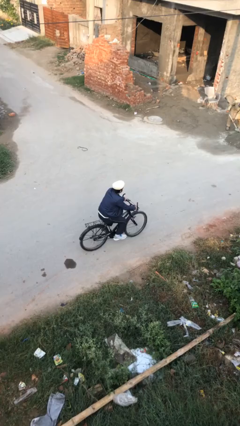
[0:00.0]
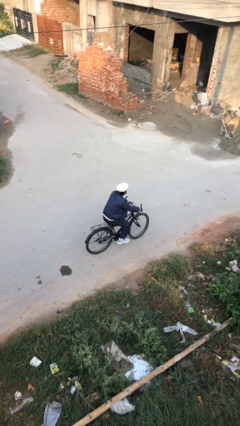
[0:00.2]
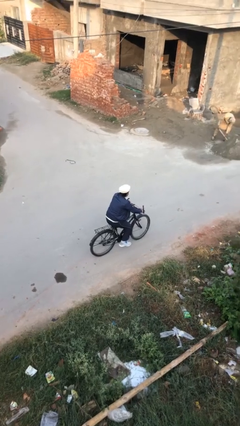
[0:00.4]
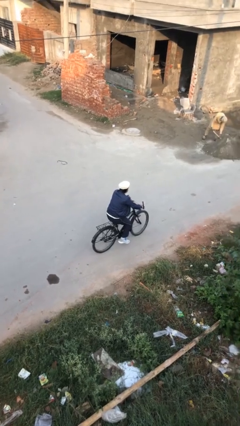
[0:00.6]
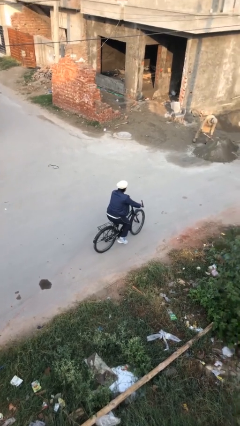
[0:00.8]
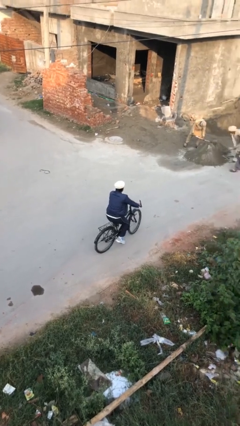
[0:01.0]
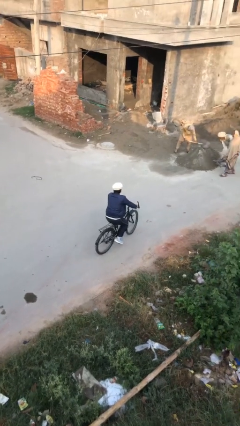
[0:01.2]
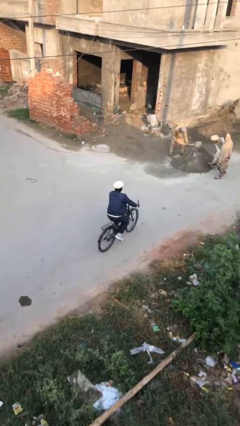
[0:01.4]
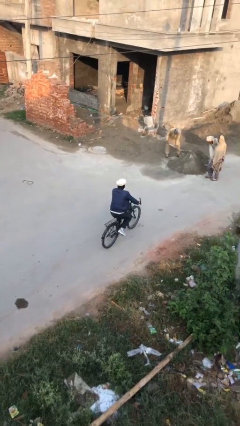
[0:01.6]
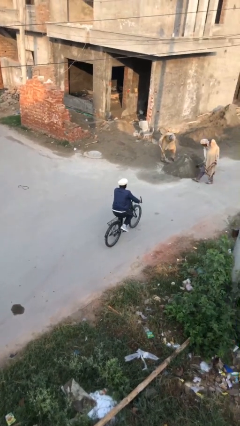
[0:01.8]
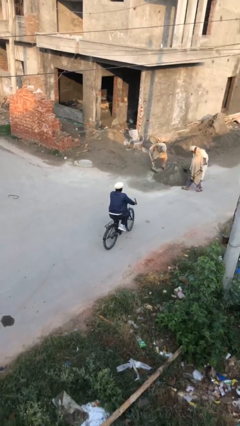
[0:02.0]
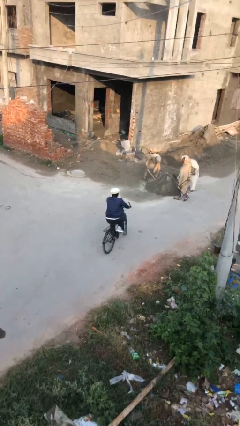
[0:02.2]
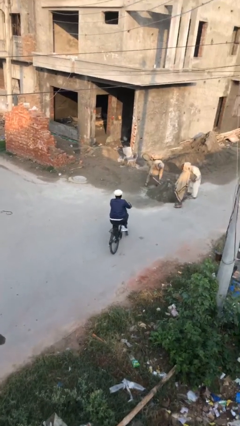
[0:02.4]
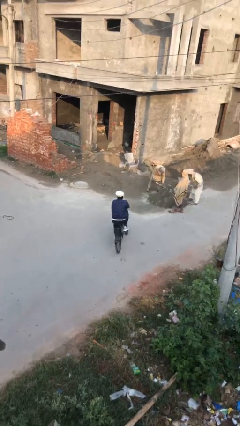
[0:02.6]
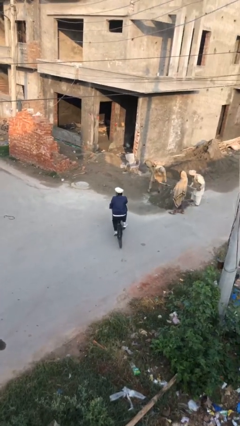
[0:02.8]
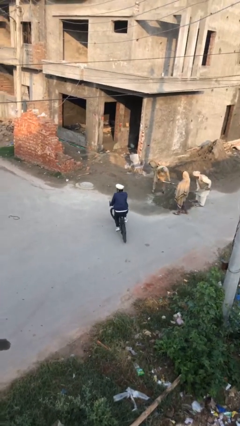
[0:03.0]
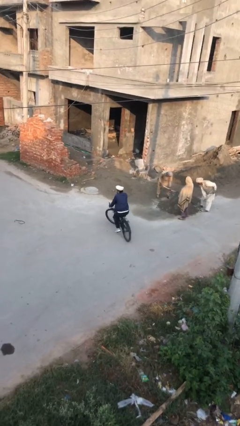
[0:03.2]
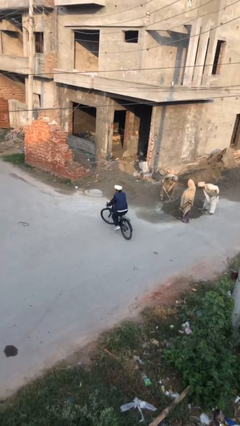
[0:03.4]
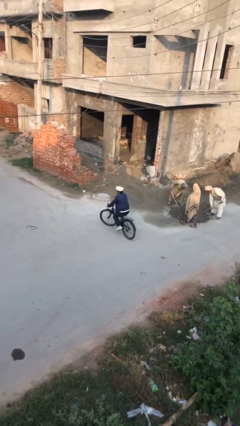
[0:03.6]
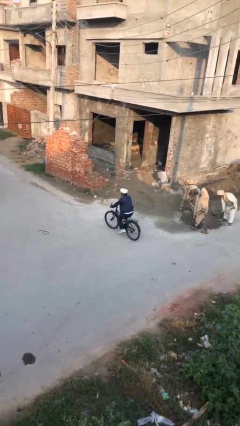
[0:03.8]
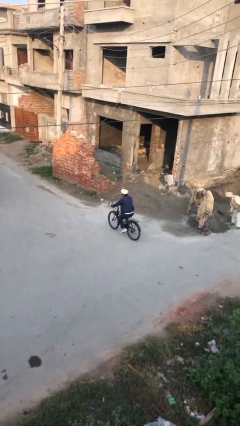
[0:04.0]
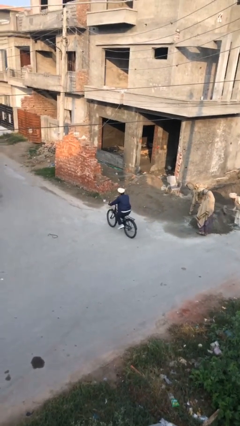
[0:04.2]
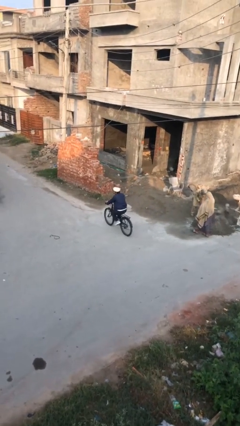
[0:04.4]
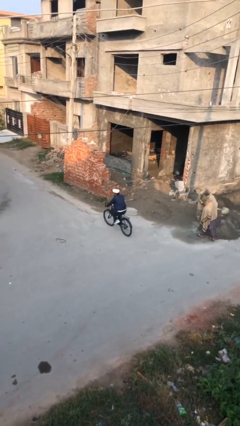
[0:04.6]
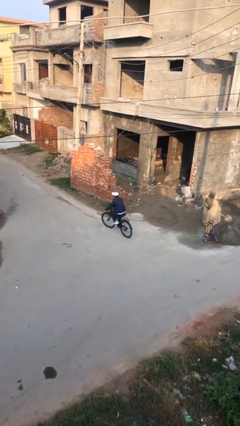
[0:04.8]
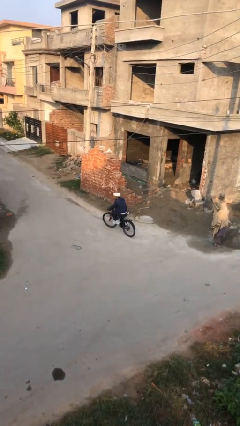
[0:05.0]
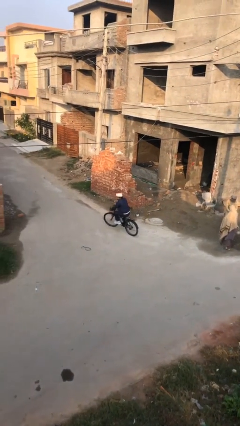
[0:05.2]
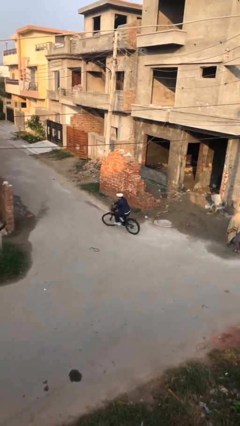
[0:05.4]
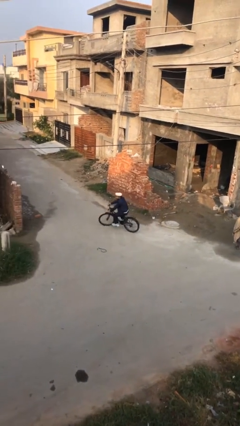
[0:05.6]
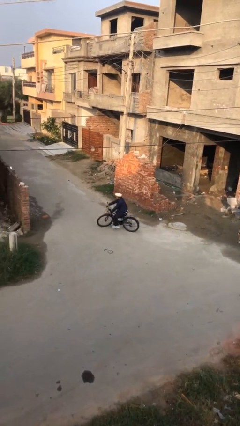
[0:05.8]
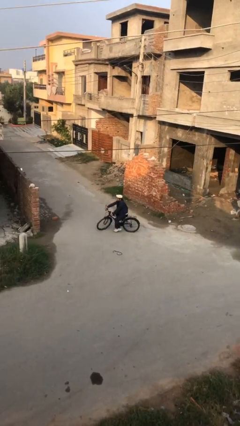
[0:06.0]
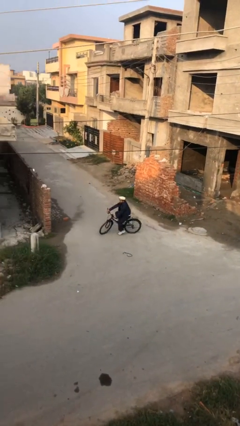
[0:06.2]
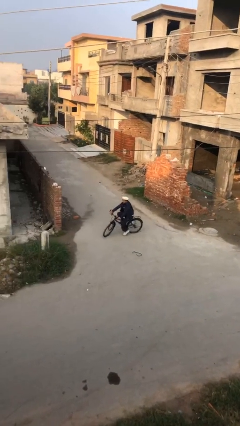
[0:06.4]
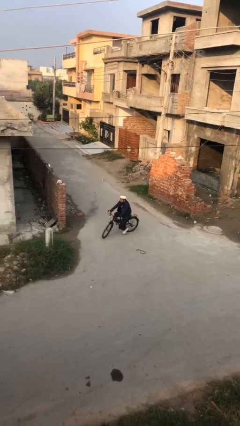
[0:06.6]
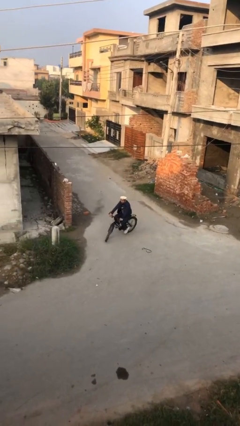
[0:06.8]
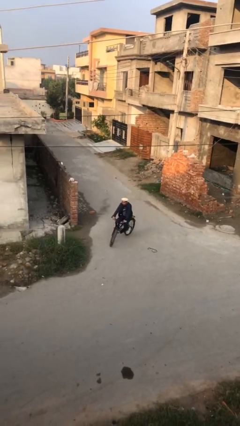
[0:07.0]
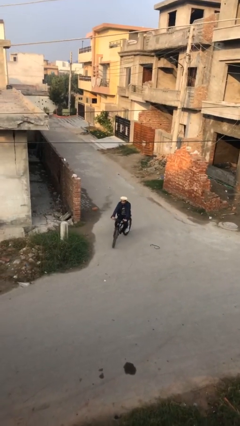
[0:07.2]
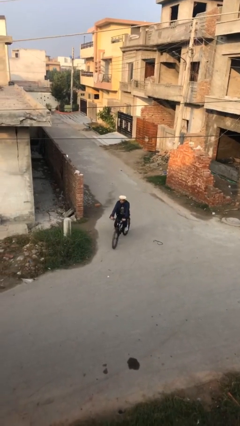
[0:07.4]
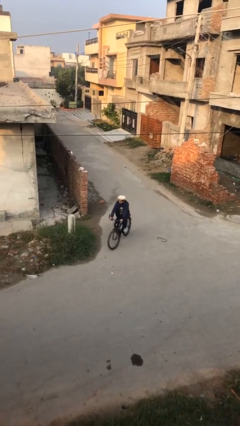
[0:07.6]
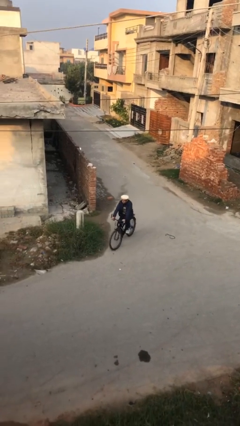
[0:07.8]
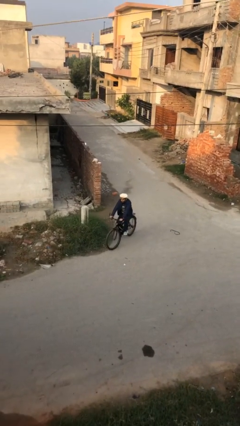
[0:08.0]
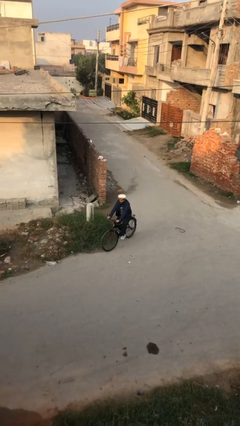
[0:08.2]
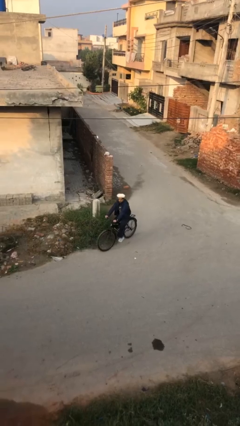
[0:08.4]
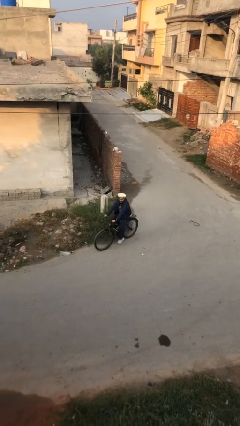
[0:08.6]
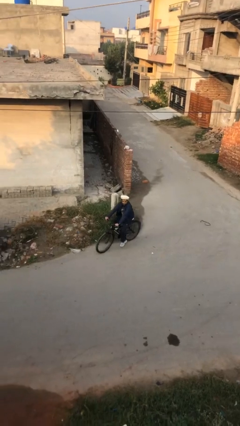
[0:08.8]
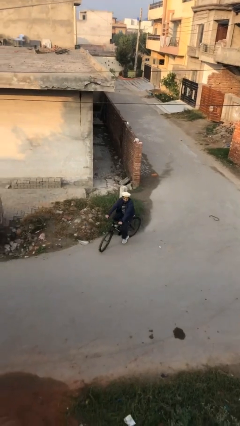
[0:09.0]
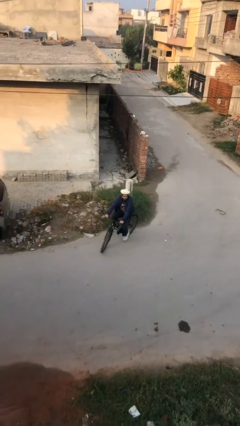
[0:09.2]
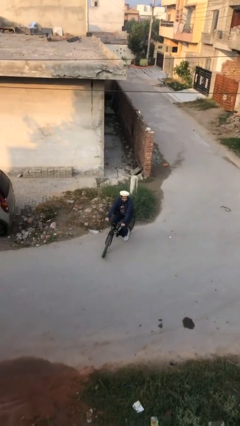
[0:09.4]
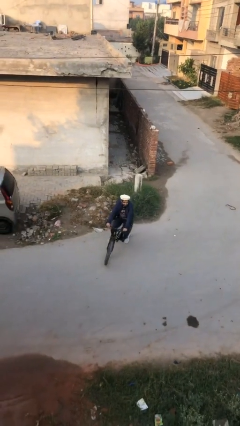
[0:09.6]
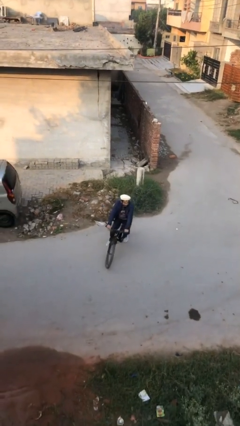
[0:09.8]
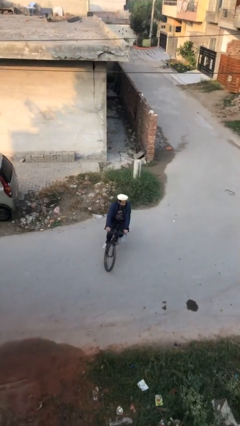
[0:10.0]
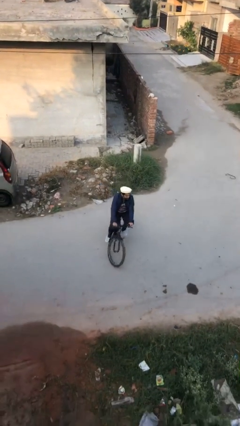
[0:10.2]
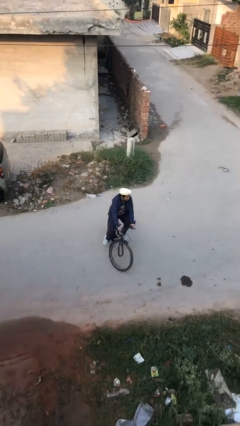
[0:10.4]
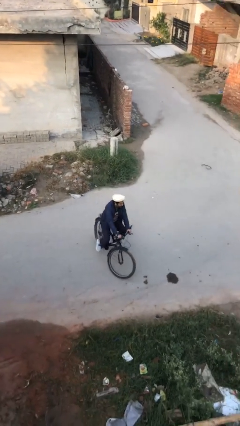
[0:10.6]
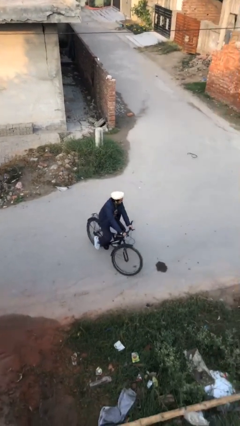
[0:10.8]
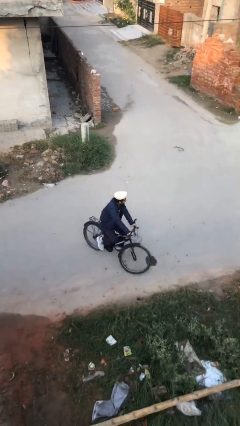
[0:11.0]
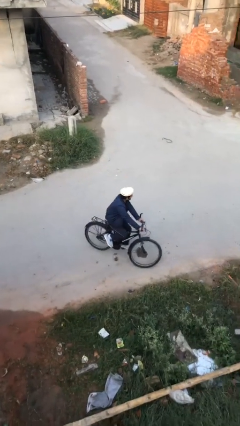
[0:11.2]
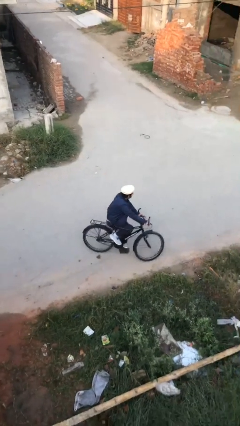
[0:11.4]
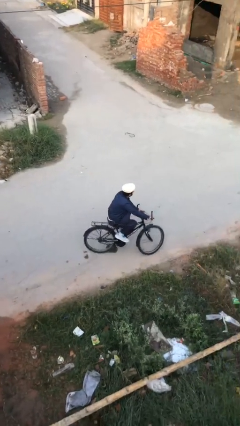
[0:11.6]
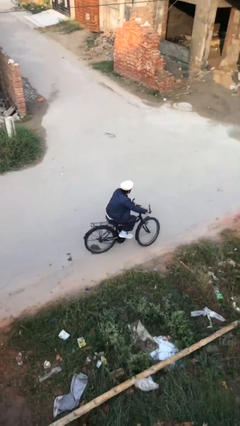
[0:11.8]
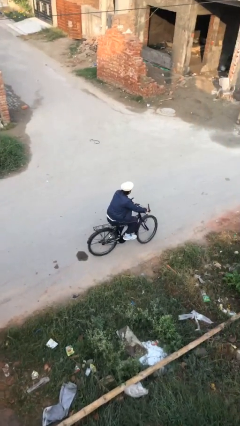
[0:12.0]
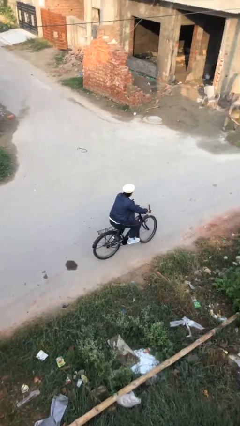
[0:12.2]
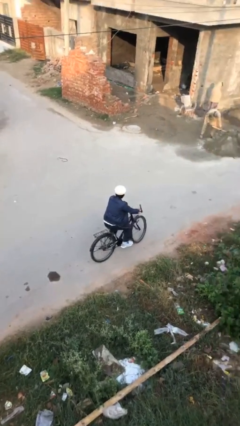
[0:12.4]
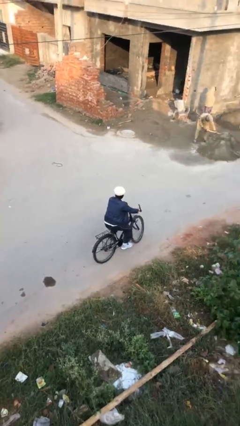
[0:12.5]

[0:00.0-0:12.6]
person rides bicycle

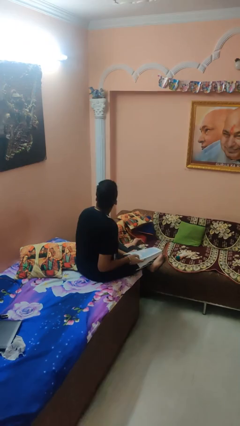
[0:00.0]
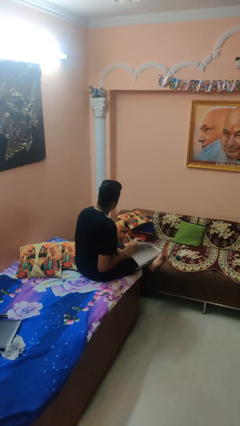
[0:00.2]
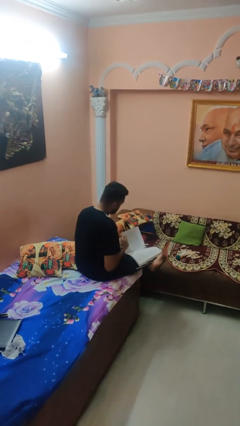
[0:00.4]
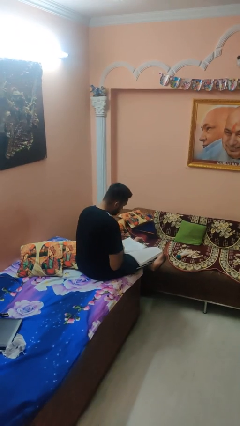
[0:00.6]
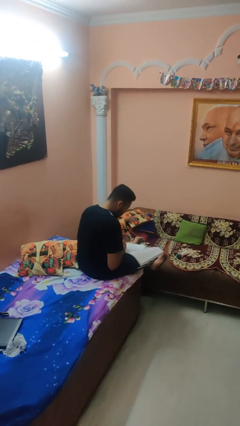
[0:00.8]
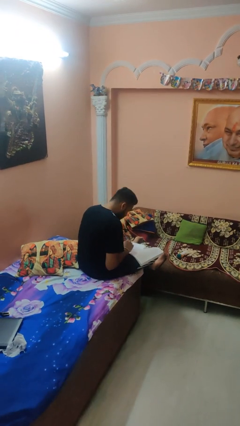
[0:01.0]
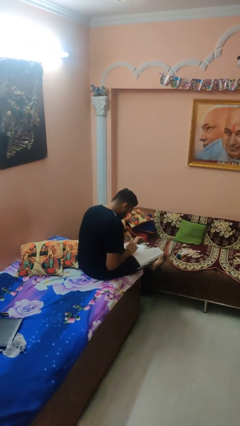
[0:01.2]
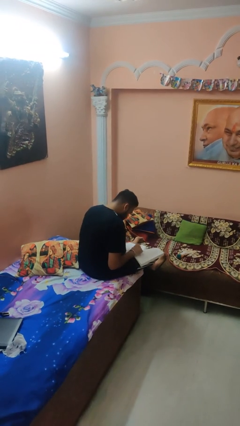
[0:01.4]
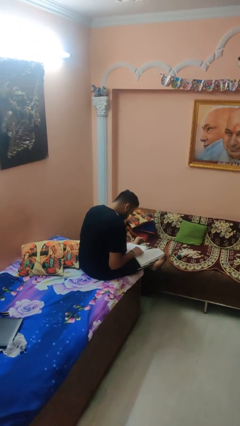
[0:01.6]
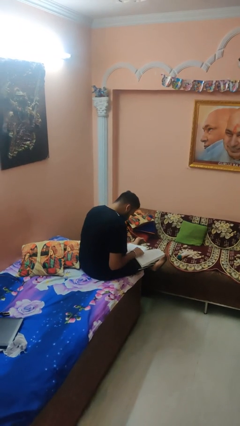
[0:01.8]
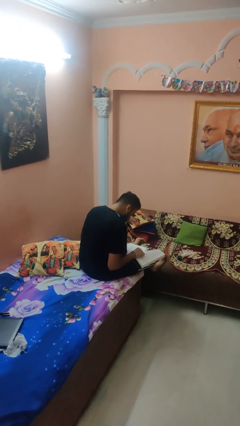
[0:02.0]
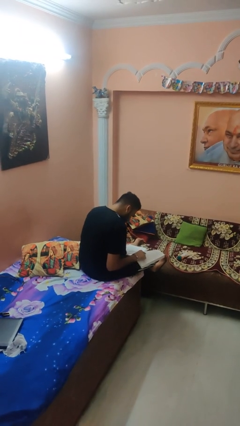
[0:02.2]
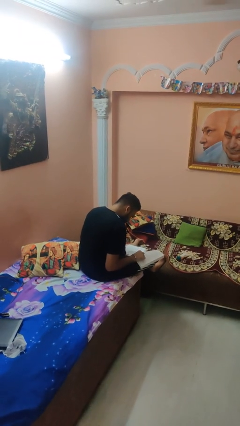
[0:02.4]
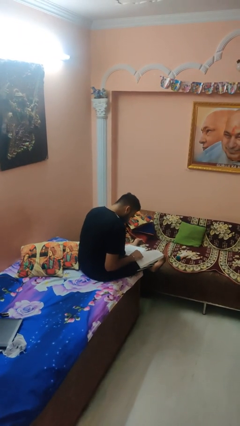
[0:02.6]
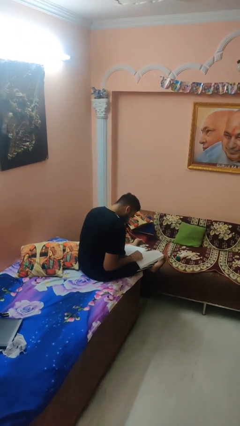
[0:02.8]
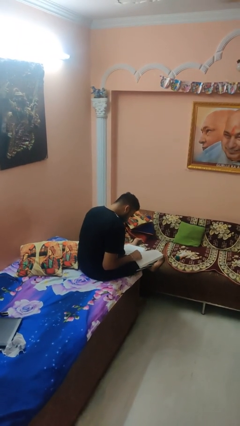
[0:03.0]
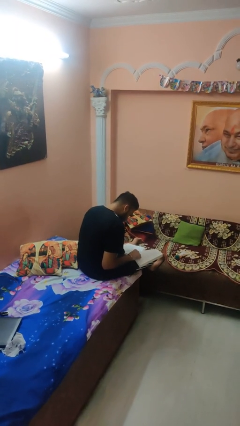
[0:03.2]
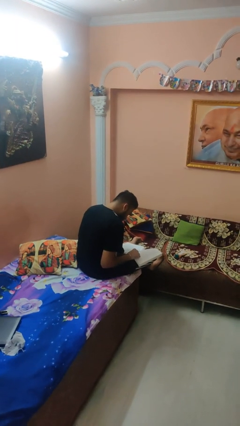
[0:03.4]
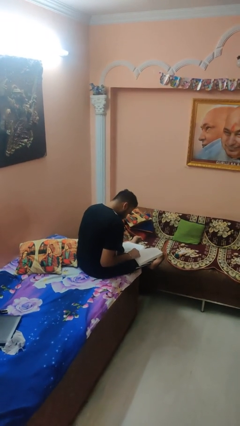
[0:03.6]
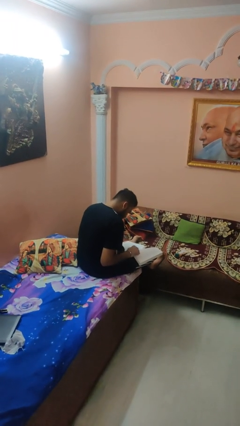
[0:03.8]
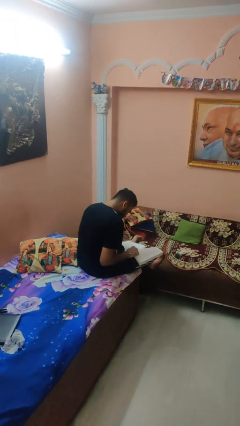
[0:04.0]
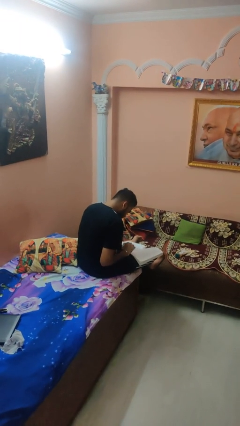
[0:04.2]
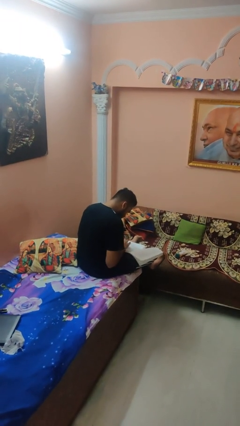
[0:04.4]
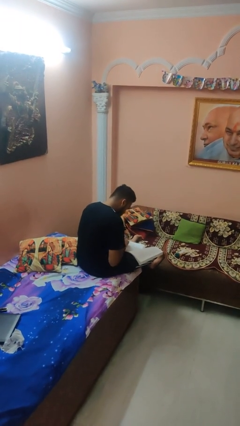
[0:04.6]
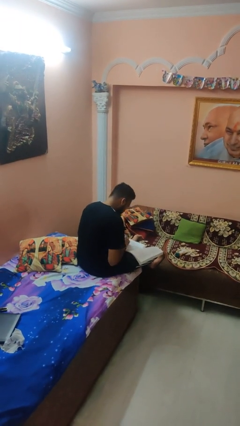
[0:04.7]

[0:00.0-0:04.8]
person reads book

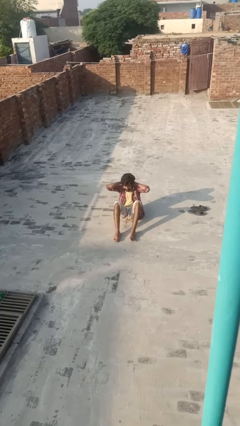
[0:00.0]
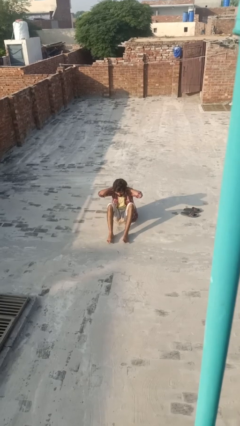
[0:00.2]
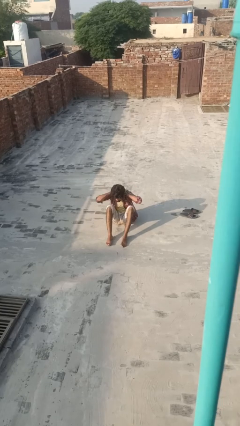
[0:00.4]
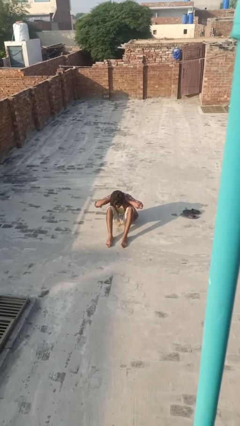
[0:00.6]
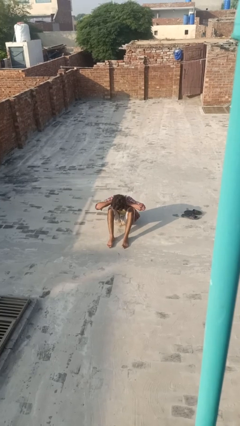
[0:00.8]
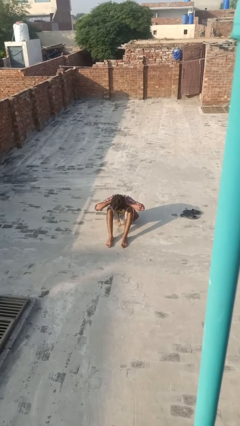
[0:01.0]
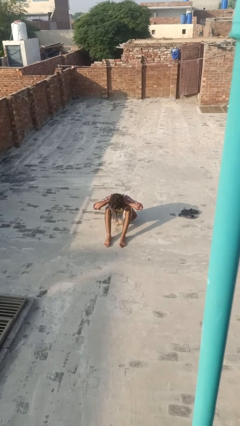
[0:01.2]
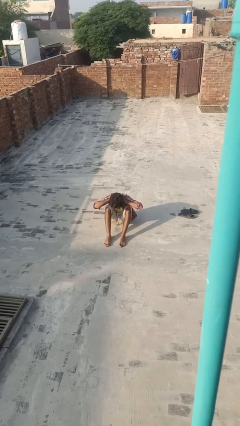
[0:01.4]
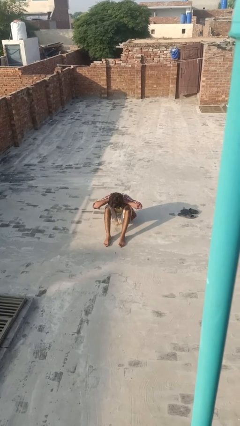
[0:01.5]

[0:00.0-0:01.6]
person exercises with situp
